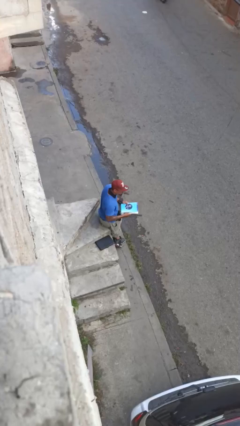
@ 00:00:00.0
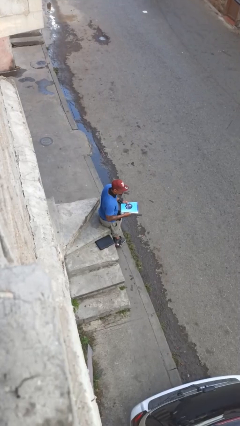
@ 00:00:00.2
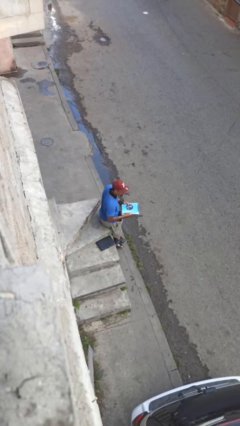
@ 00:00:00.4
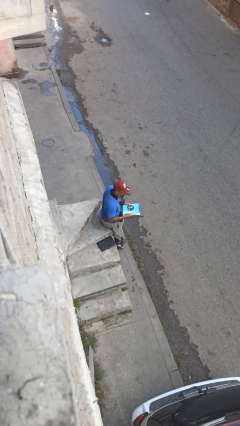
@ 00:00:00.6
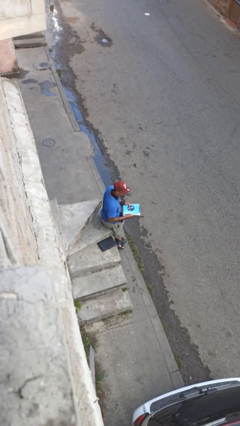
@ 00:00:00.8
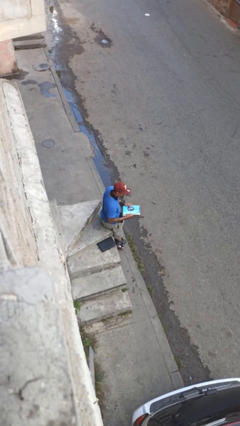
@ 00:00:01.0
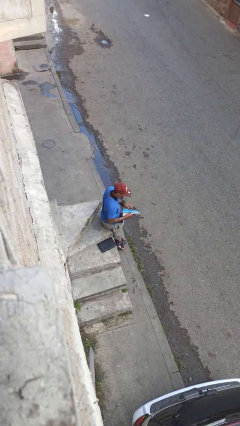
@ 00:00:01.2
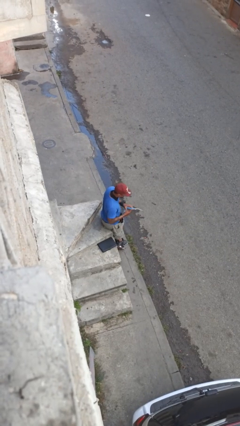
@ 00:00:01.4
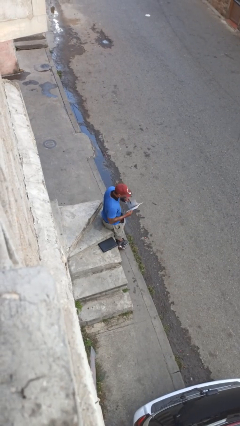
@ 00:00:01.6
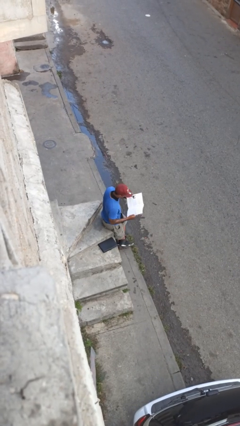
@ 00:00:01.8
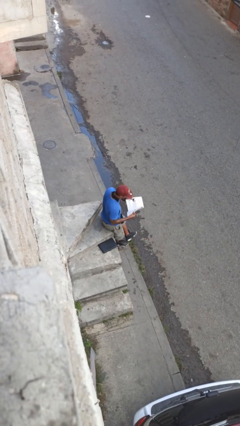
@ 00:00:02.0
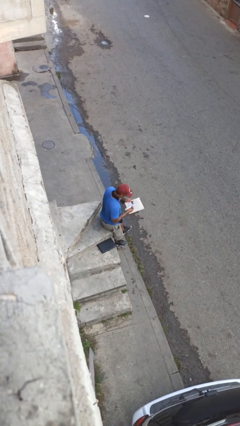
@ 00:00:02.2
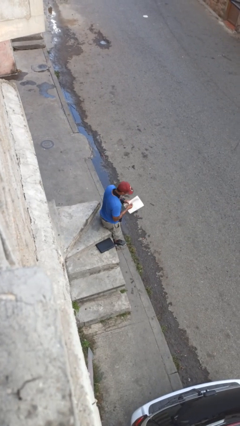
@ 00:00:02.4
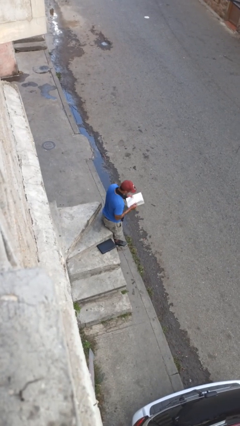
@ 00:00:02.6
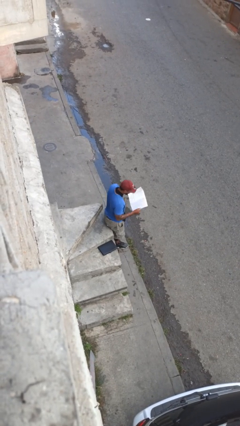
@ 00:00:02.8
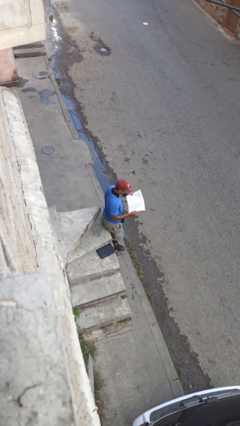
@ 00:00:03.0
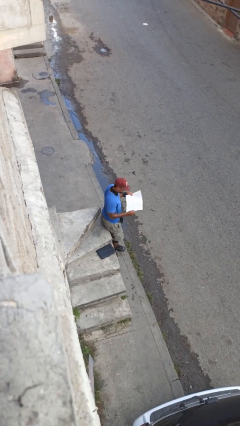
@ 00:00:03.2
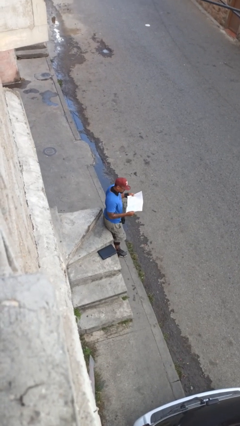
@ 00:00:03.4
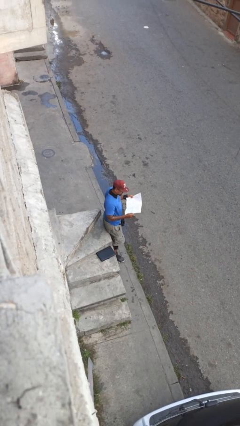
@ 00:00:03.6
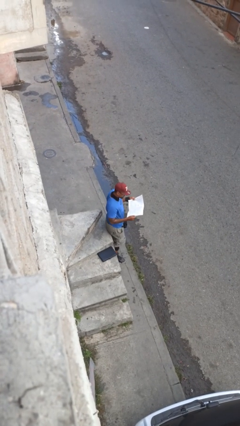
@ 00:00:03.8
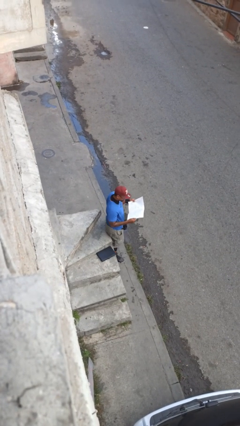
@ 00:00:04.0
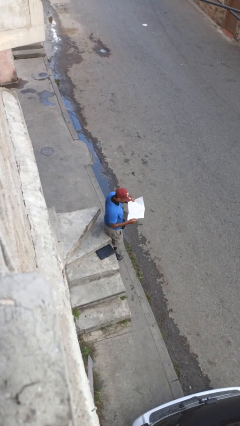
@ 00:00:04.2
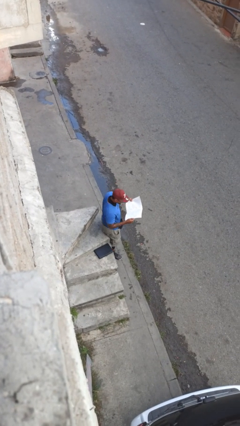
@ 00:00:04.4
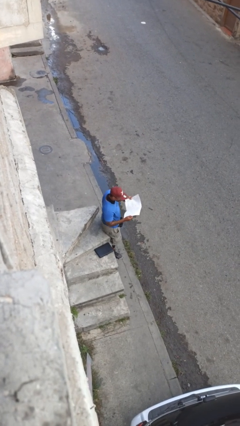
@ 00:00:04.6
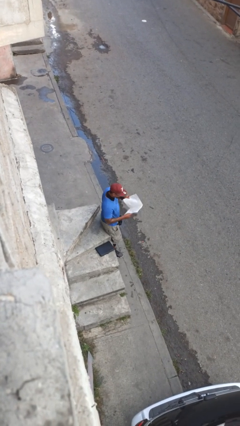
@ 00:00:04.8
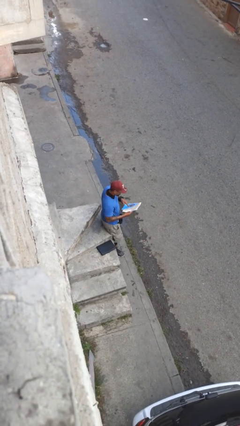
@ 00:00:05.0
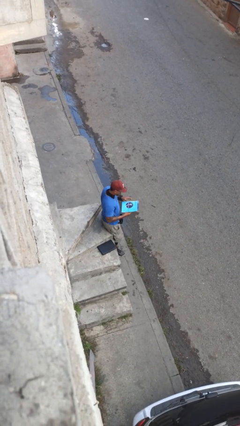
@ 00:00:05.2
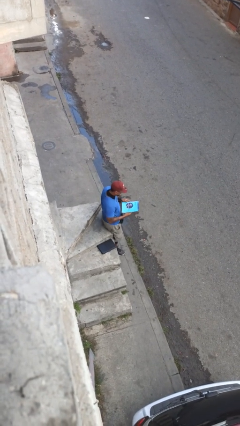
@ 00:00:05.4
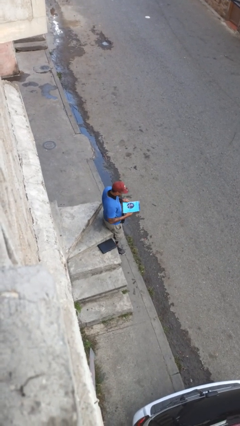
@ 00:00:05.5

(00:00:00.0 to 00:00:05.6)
person reads document

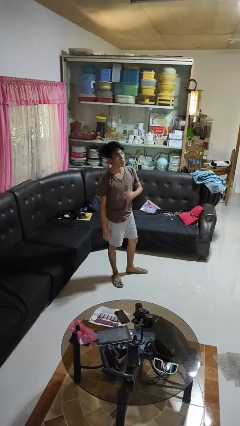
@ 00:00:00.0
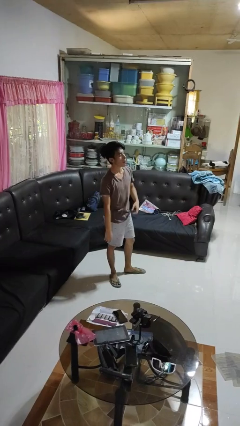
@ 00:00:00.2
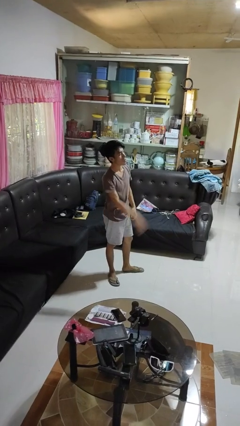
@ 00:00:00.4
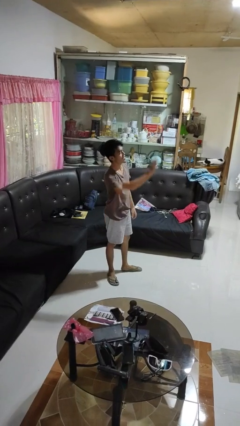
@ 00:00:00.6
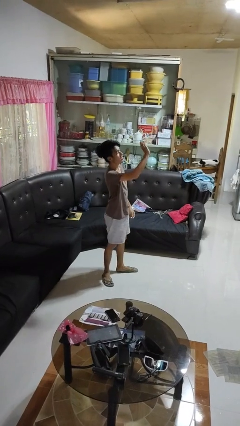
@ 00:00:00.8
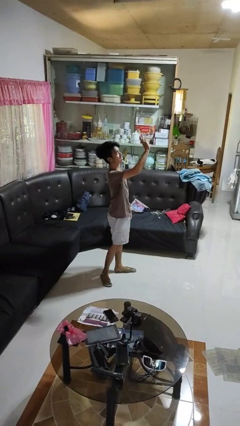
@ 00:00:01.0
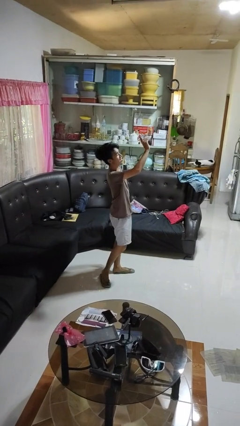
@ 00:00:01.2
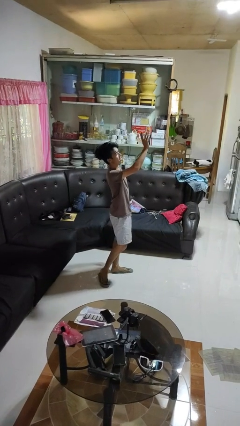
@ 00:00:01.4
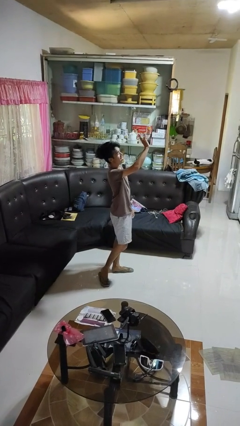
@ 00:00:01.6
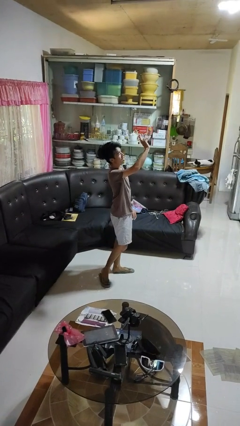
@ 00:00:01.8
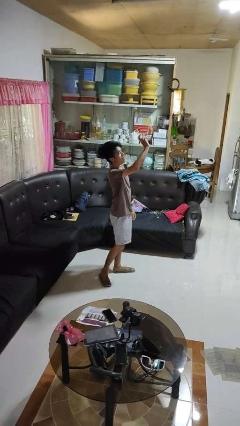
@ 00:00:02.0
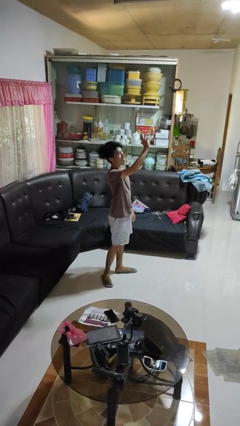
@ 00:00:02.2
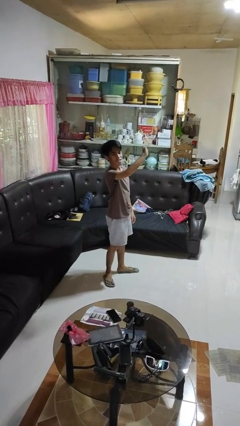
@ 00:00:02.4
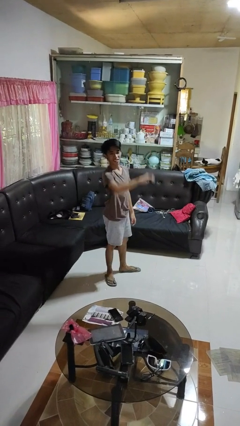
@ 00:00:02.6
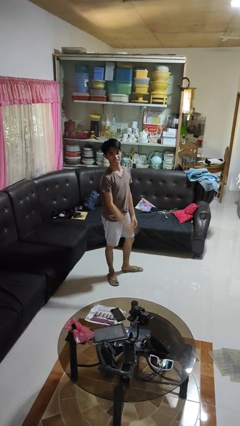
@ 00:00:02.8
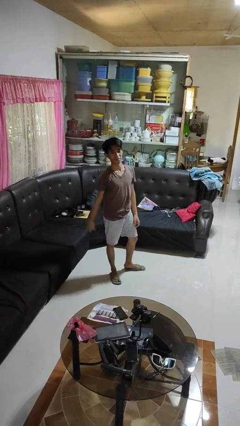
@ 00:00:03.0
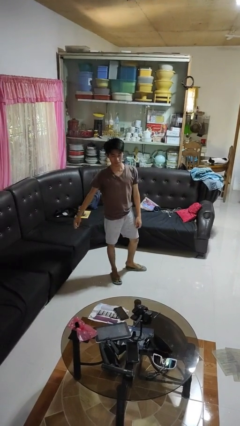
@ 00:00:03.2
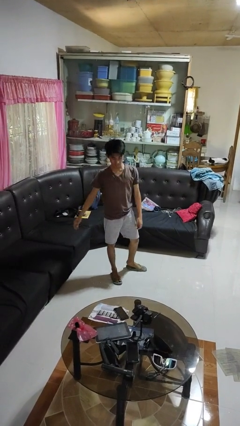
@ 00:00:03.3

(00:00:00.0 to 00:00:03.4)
person waves at person

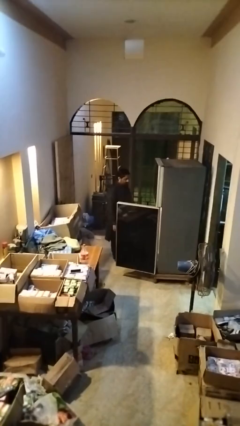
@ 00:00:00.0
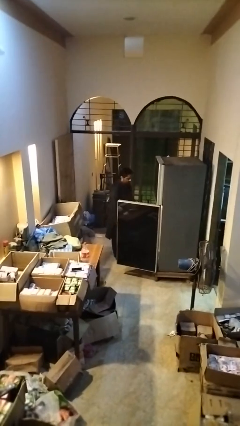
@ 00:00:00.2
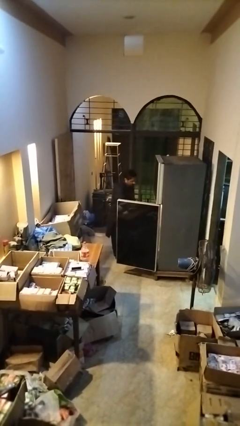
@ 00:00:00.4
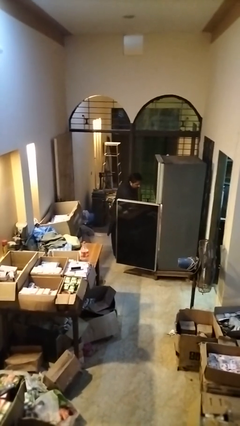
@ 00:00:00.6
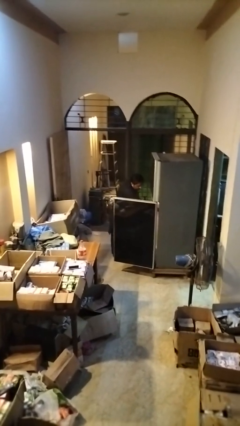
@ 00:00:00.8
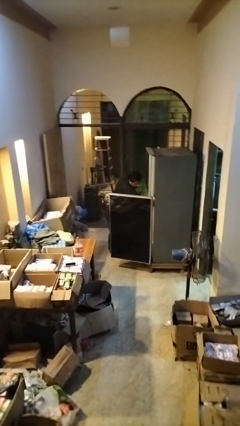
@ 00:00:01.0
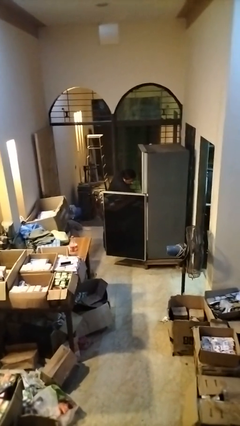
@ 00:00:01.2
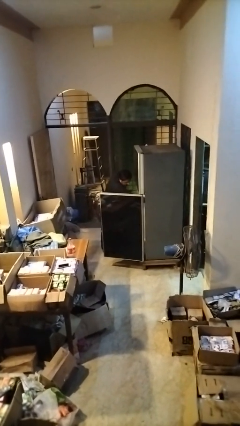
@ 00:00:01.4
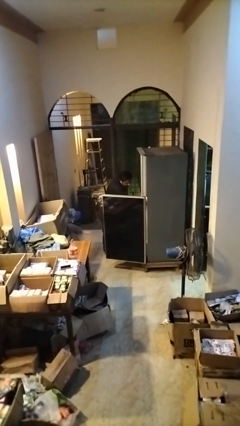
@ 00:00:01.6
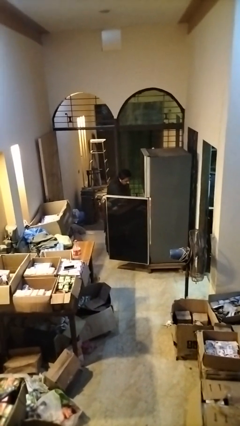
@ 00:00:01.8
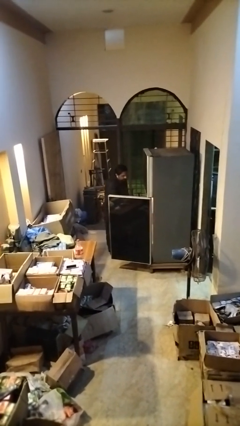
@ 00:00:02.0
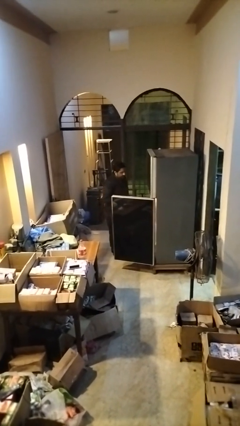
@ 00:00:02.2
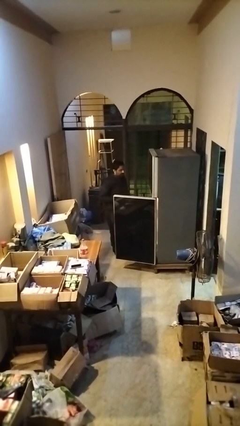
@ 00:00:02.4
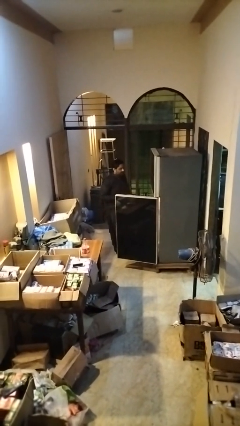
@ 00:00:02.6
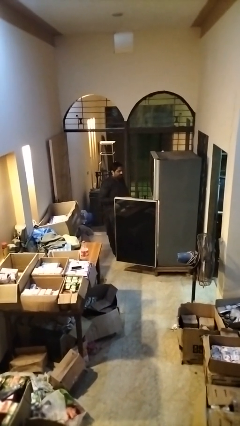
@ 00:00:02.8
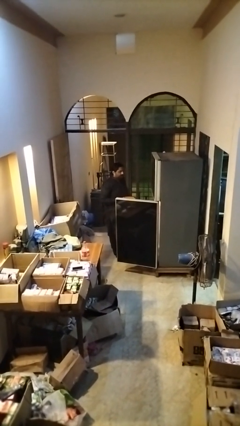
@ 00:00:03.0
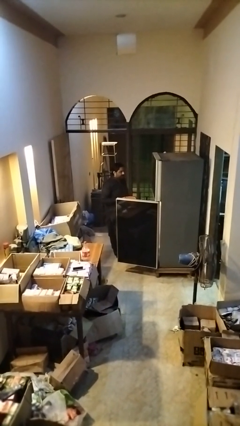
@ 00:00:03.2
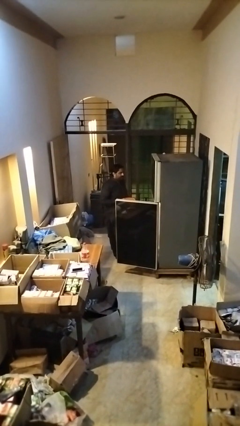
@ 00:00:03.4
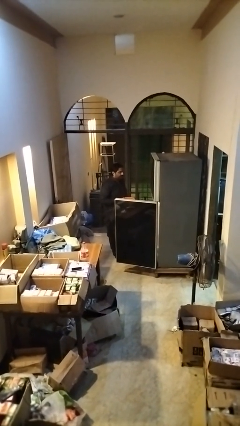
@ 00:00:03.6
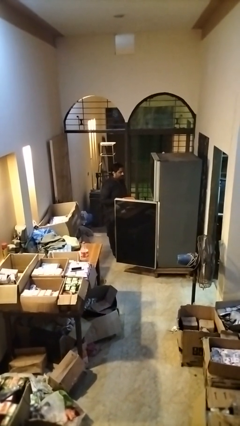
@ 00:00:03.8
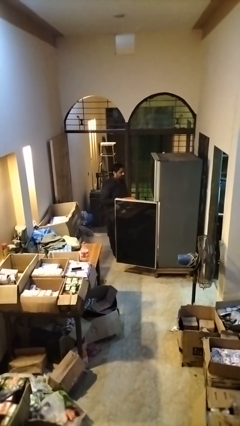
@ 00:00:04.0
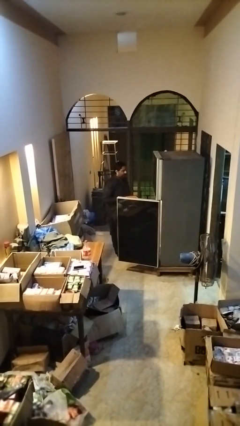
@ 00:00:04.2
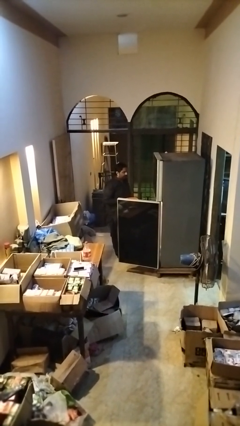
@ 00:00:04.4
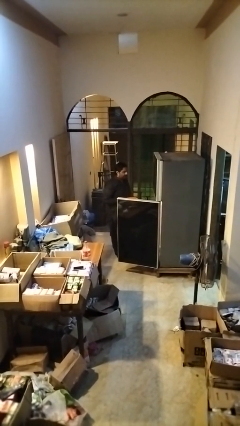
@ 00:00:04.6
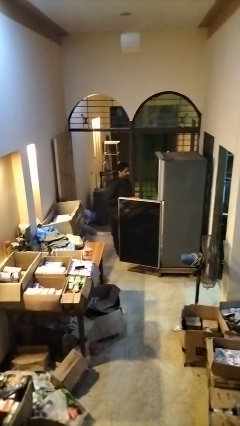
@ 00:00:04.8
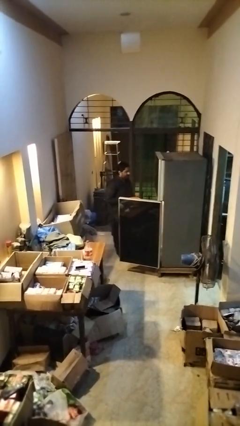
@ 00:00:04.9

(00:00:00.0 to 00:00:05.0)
person puts object into refrigerator

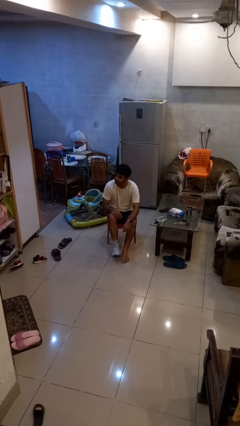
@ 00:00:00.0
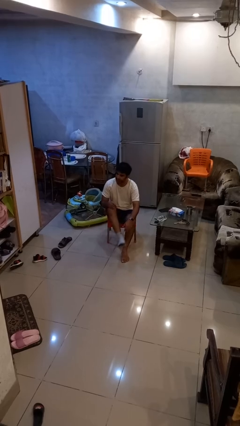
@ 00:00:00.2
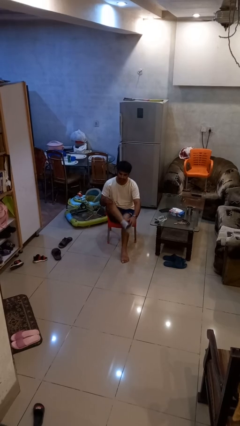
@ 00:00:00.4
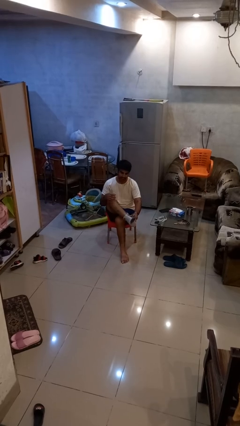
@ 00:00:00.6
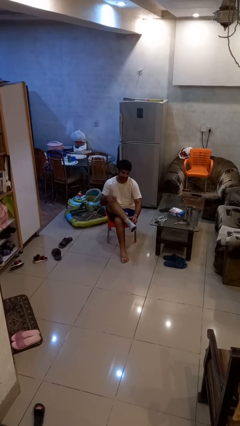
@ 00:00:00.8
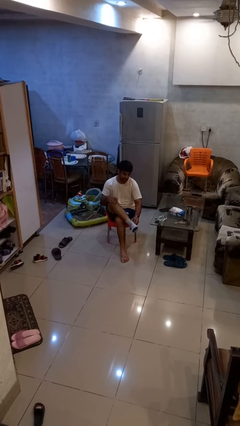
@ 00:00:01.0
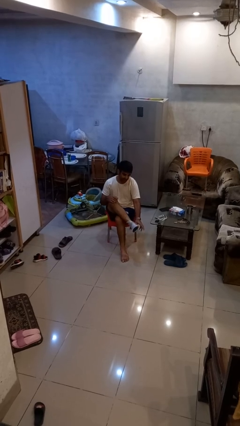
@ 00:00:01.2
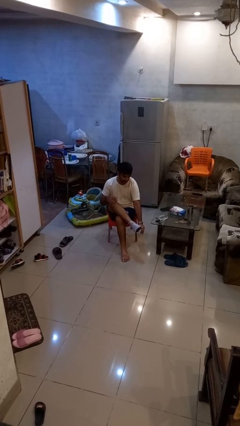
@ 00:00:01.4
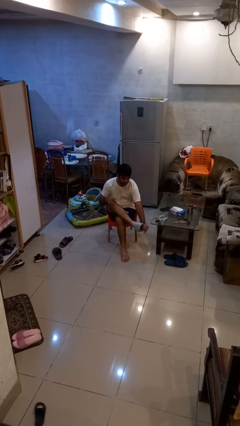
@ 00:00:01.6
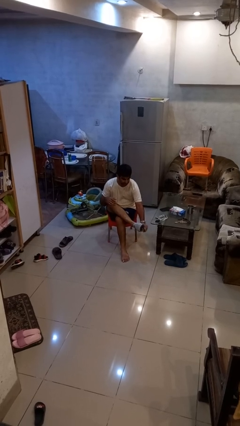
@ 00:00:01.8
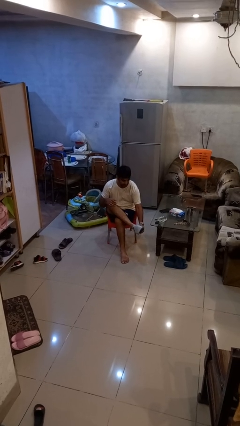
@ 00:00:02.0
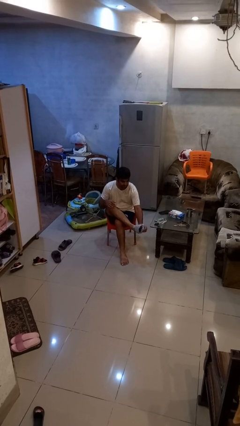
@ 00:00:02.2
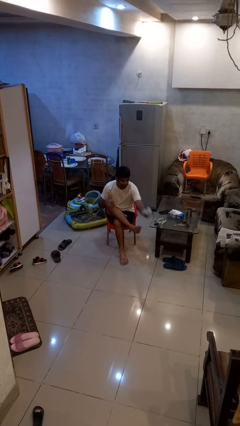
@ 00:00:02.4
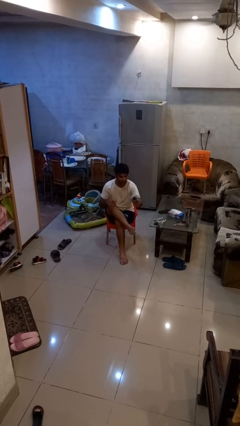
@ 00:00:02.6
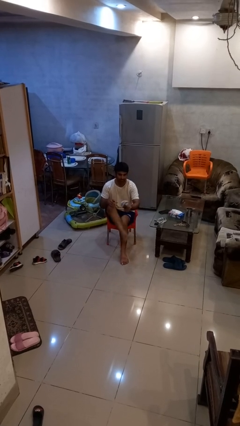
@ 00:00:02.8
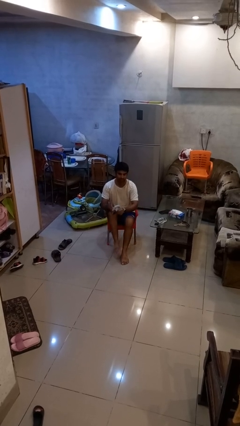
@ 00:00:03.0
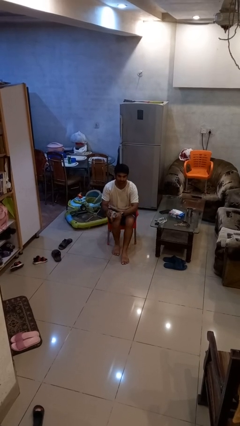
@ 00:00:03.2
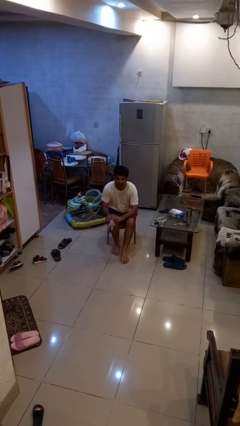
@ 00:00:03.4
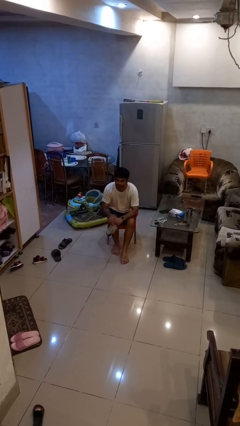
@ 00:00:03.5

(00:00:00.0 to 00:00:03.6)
person takes off socks
